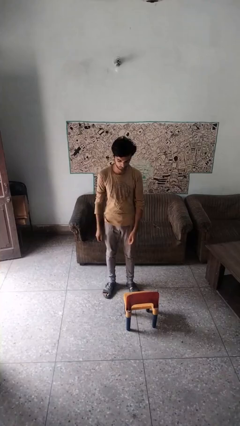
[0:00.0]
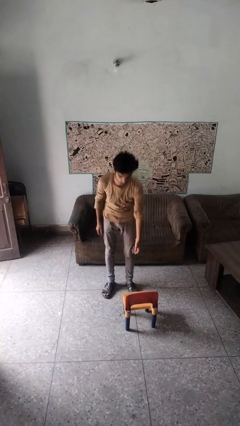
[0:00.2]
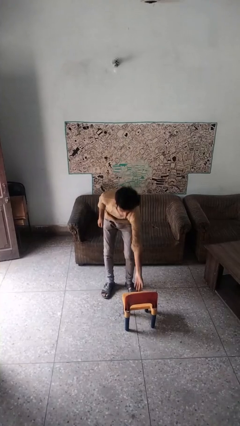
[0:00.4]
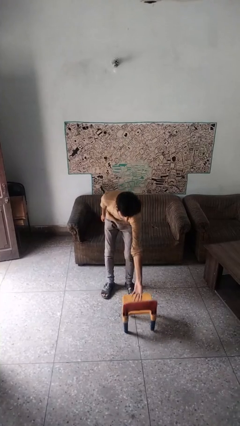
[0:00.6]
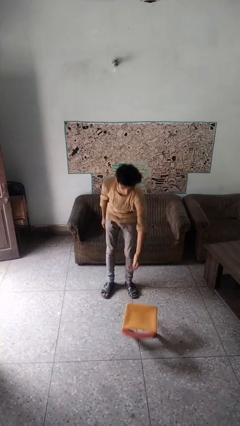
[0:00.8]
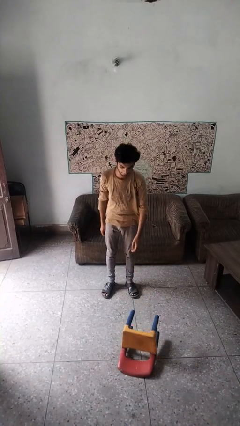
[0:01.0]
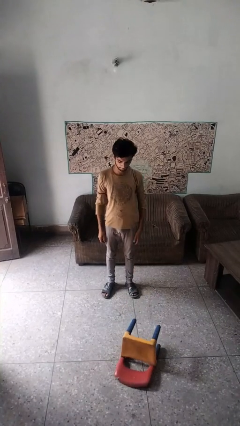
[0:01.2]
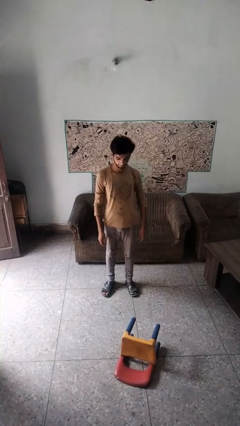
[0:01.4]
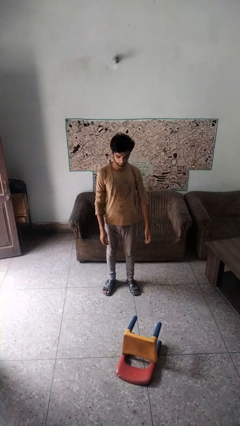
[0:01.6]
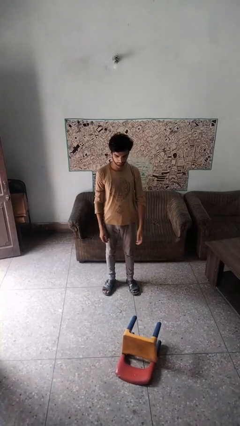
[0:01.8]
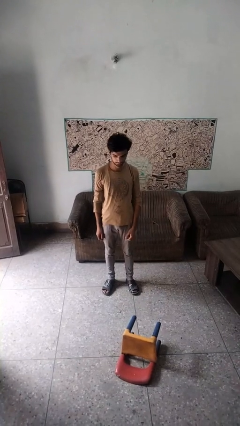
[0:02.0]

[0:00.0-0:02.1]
person knocks over furniture

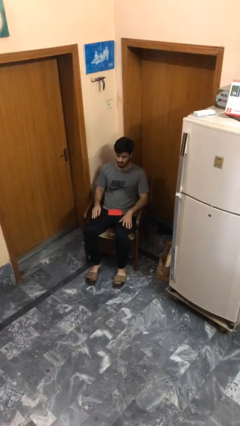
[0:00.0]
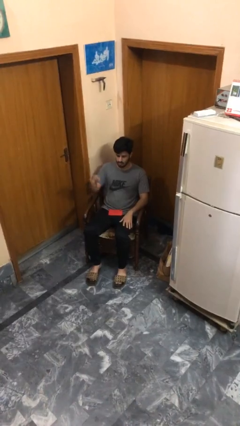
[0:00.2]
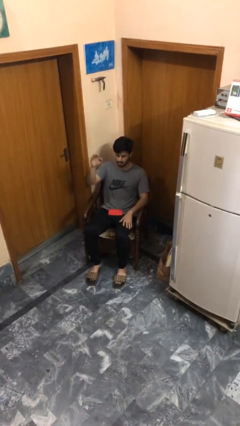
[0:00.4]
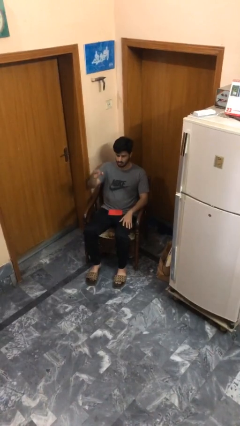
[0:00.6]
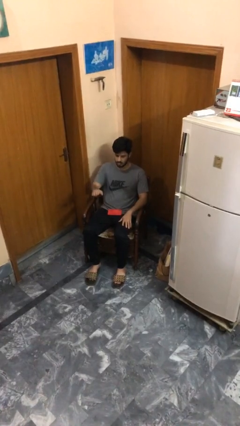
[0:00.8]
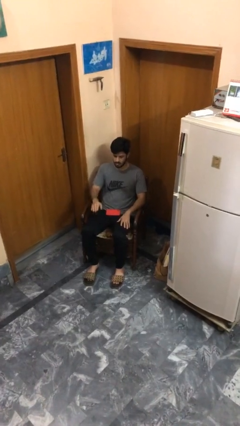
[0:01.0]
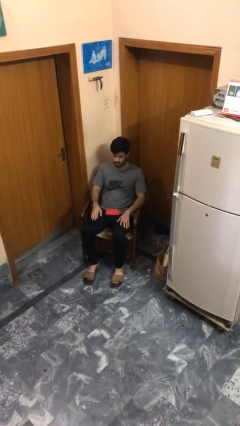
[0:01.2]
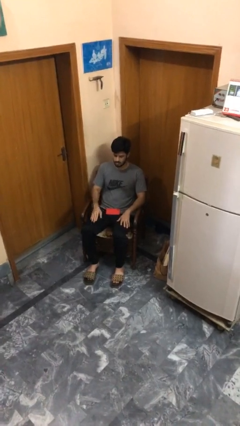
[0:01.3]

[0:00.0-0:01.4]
person gestures swipe down

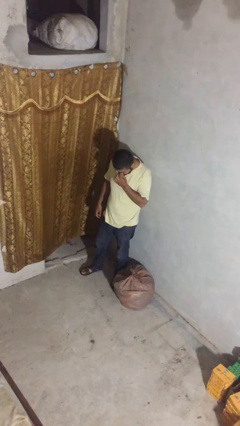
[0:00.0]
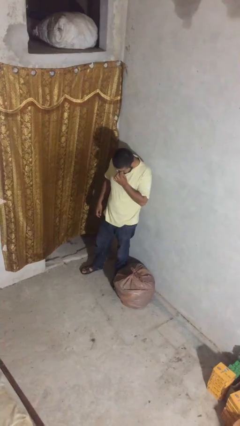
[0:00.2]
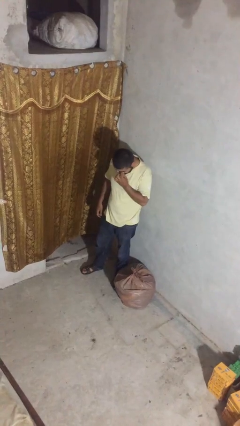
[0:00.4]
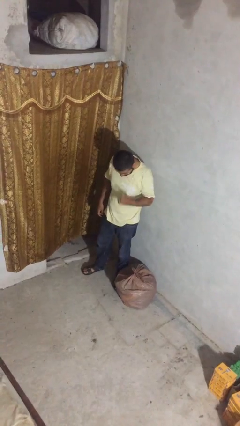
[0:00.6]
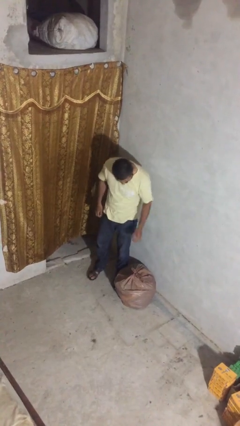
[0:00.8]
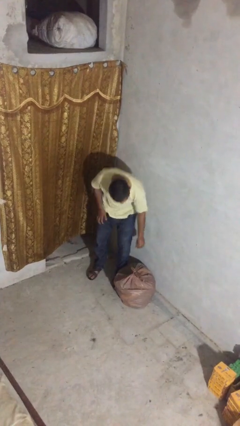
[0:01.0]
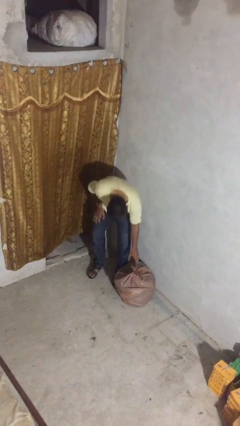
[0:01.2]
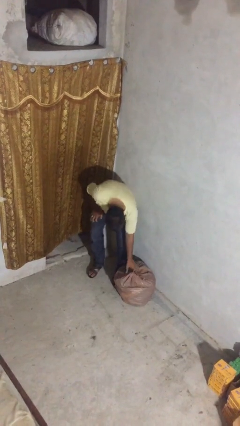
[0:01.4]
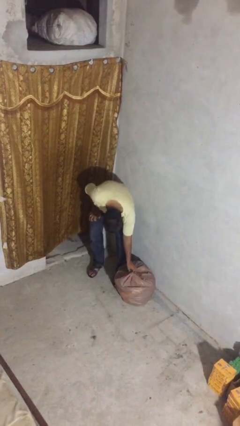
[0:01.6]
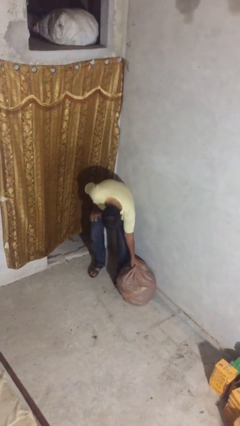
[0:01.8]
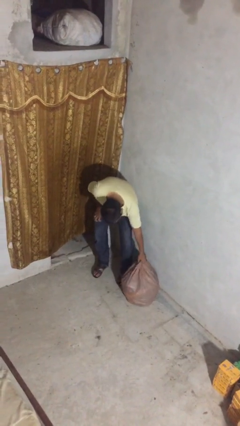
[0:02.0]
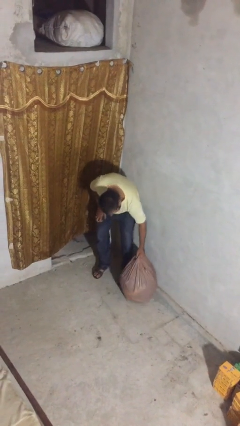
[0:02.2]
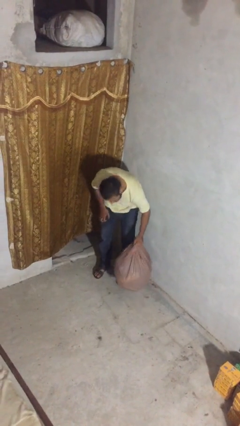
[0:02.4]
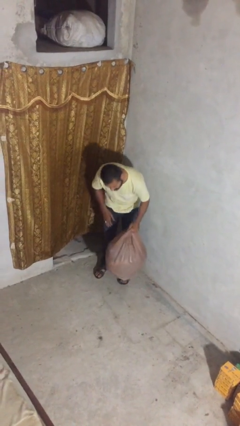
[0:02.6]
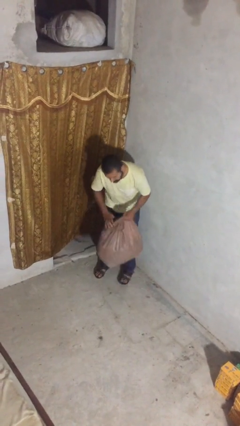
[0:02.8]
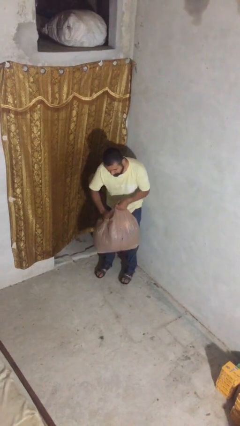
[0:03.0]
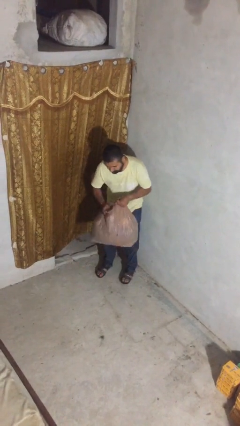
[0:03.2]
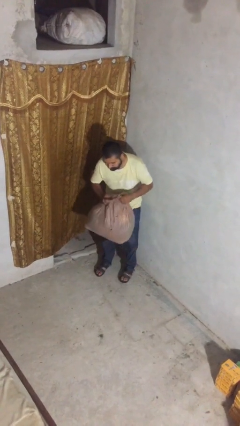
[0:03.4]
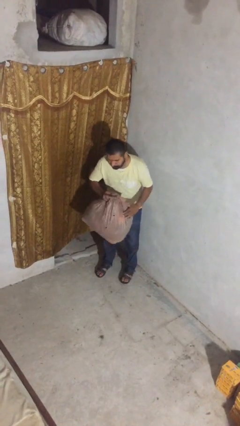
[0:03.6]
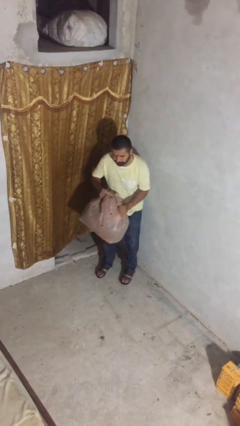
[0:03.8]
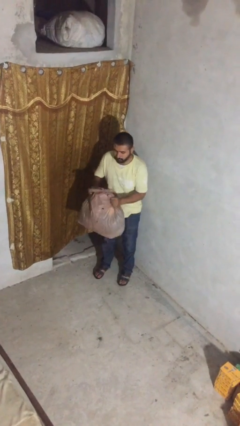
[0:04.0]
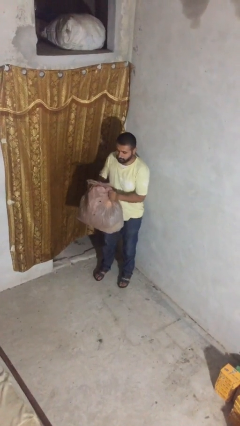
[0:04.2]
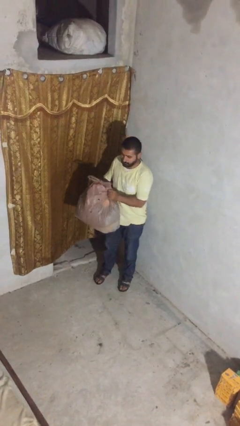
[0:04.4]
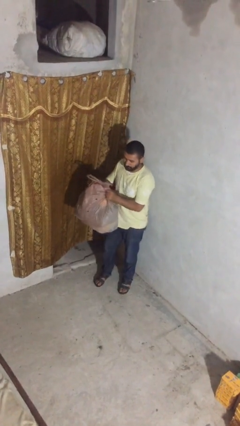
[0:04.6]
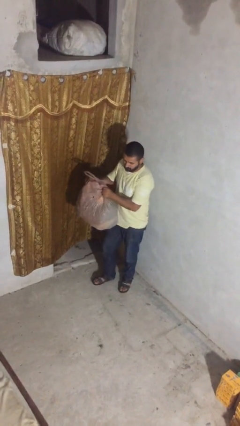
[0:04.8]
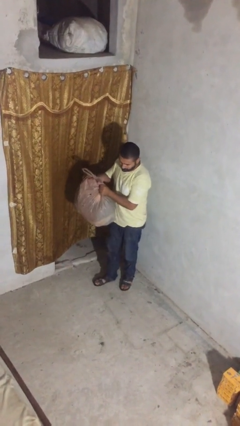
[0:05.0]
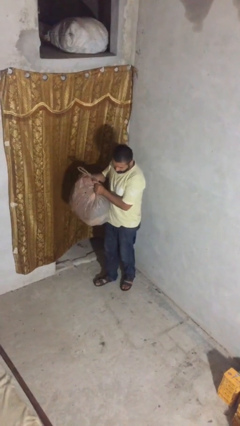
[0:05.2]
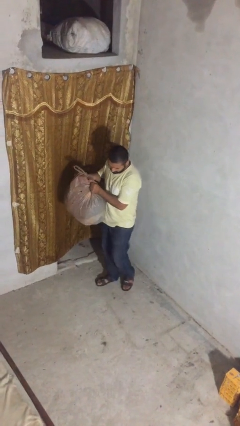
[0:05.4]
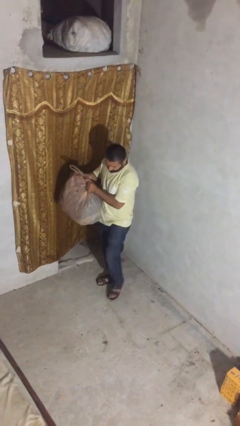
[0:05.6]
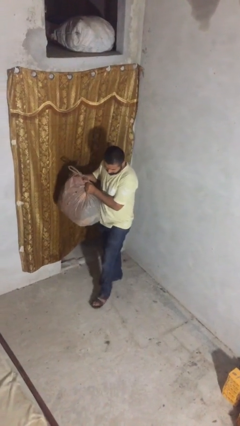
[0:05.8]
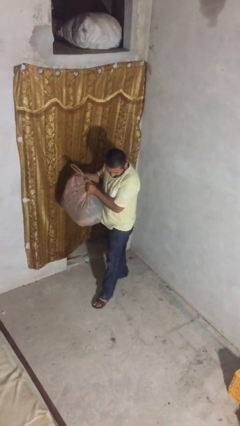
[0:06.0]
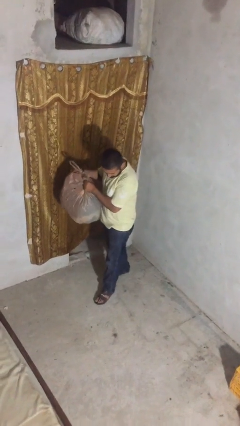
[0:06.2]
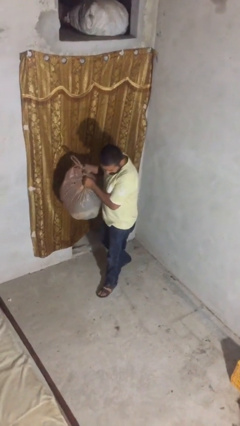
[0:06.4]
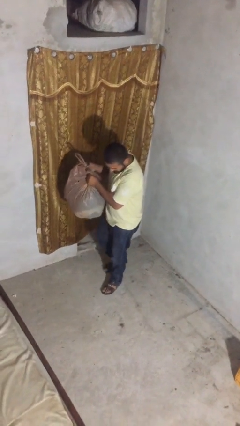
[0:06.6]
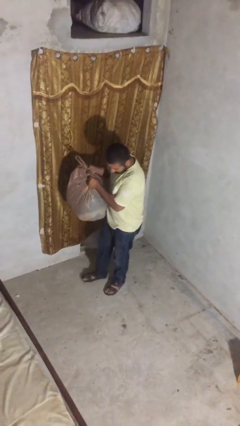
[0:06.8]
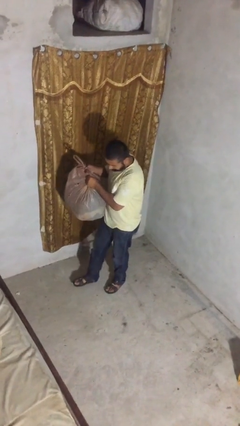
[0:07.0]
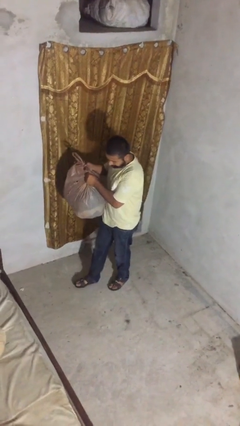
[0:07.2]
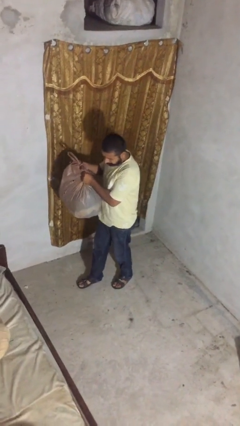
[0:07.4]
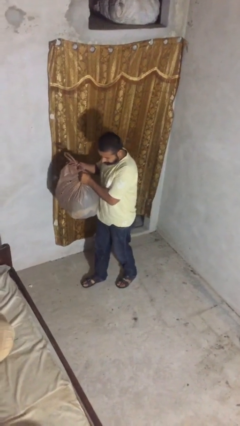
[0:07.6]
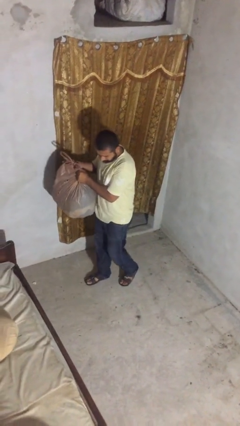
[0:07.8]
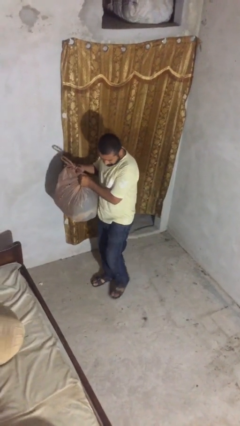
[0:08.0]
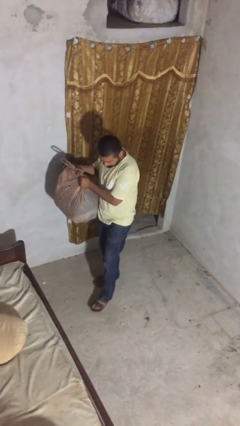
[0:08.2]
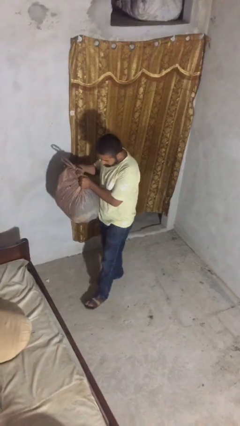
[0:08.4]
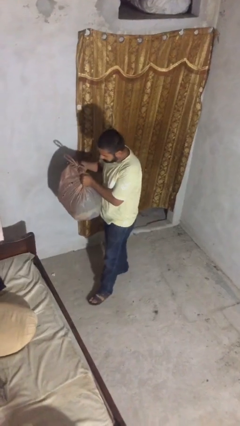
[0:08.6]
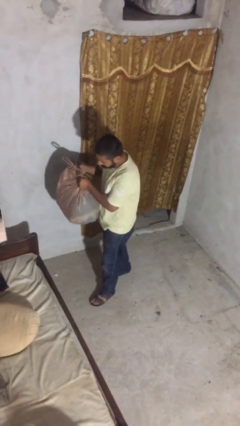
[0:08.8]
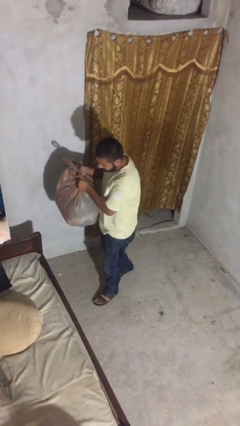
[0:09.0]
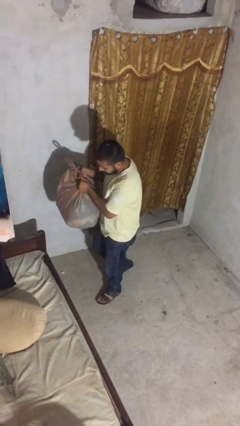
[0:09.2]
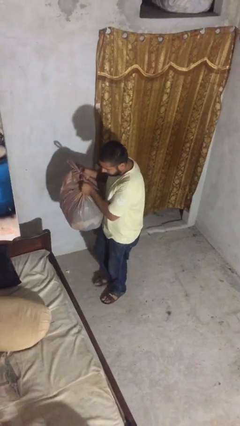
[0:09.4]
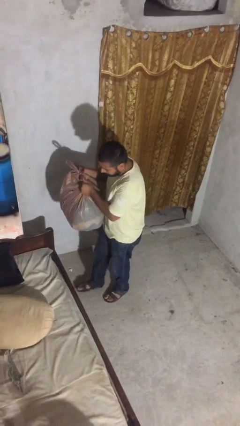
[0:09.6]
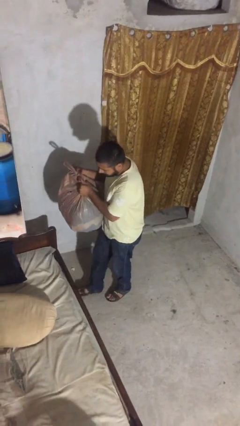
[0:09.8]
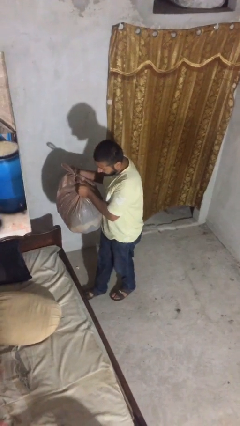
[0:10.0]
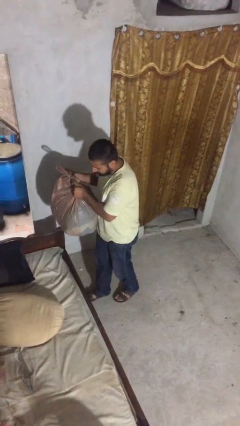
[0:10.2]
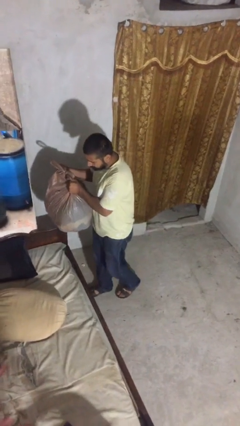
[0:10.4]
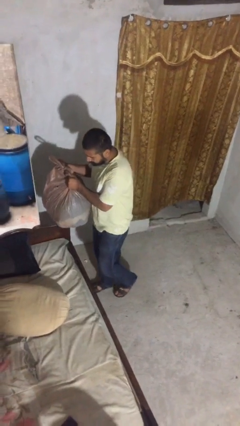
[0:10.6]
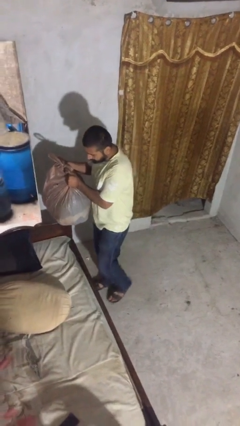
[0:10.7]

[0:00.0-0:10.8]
person carries heavy object

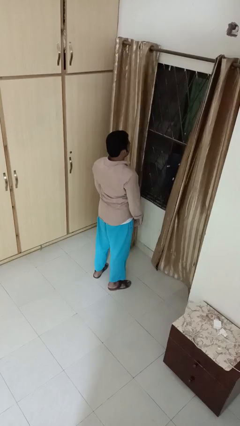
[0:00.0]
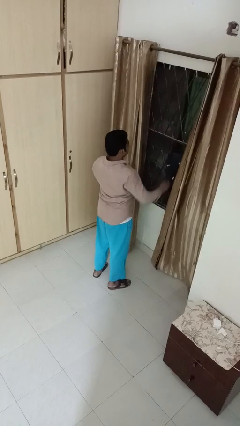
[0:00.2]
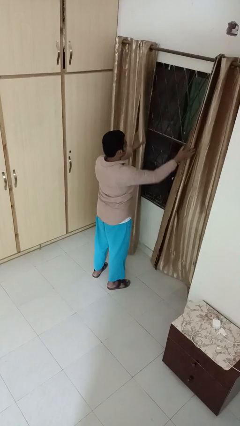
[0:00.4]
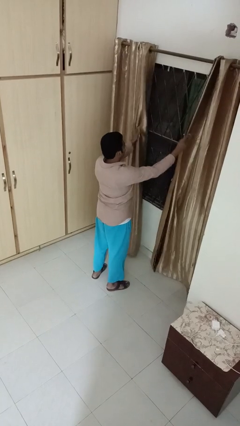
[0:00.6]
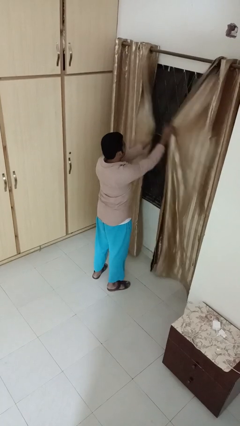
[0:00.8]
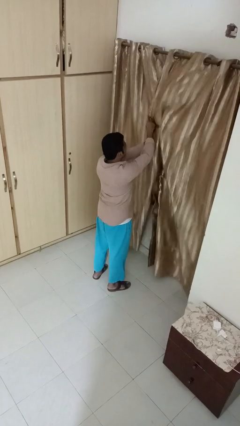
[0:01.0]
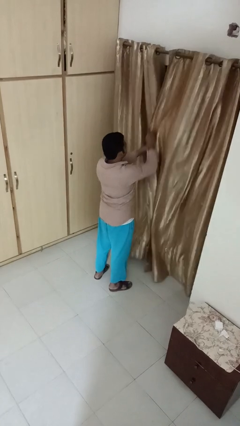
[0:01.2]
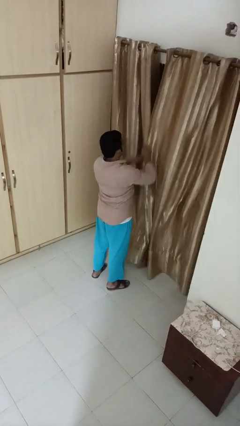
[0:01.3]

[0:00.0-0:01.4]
person closes curtains

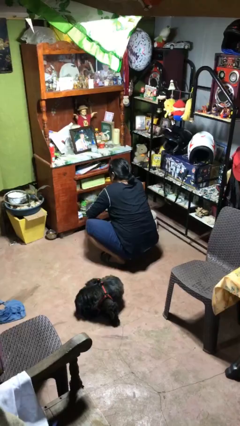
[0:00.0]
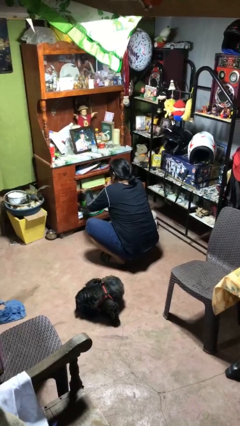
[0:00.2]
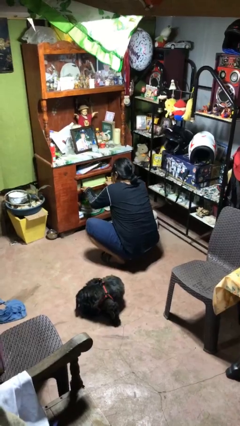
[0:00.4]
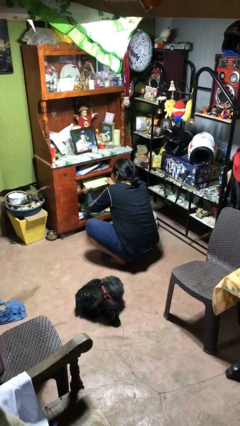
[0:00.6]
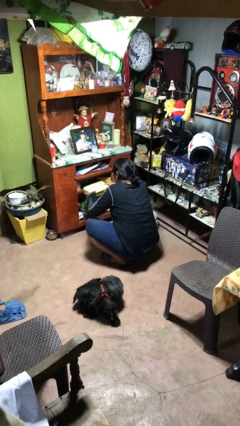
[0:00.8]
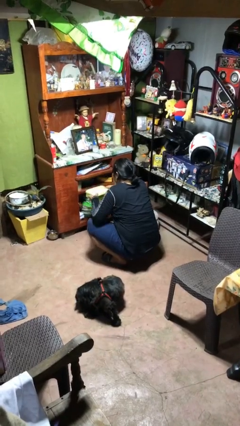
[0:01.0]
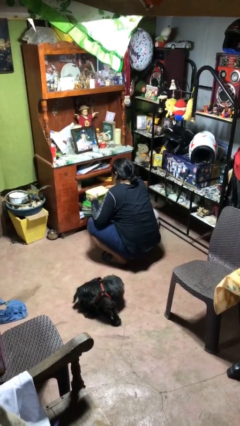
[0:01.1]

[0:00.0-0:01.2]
person picks up object from cabinet

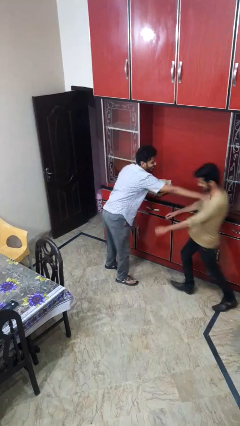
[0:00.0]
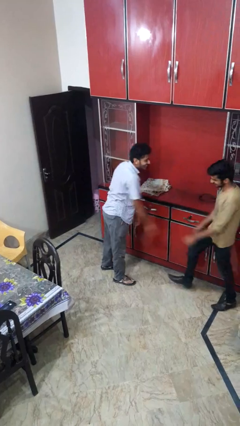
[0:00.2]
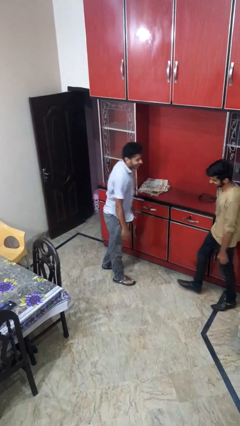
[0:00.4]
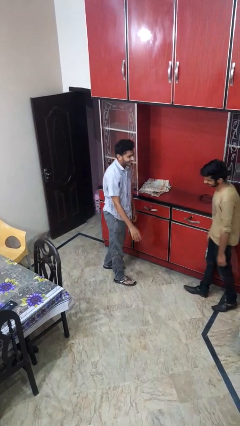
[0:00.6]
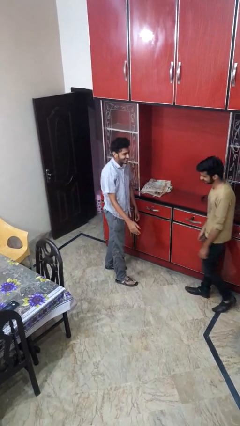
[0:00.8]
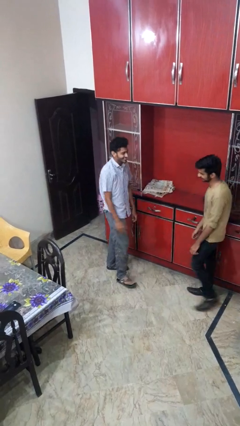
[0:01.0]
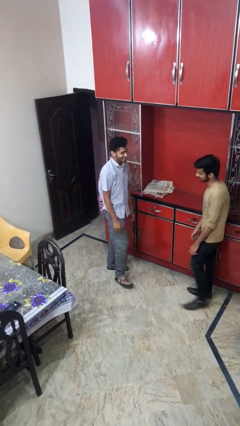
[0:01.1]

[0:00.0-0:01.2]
person shoves person
